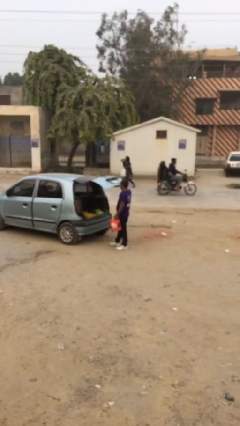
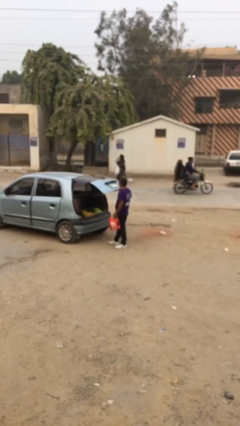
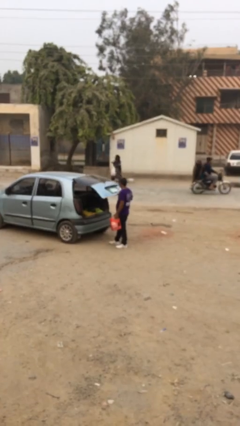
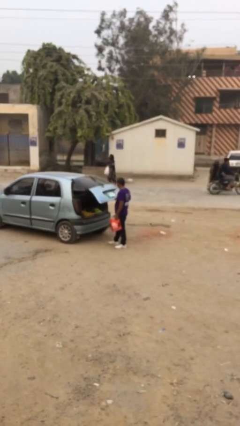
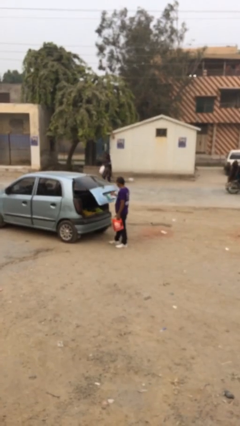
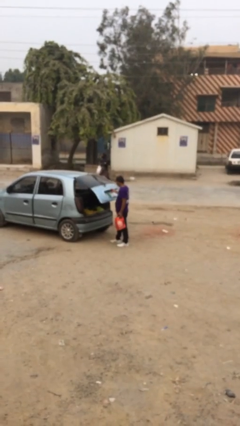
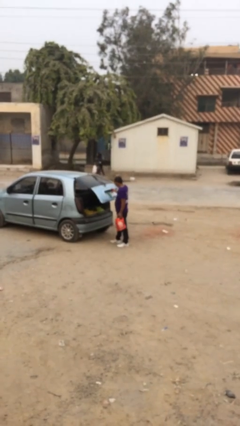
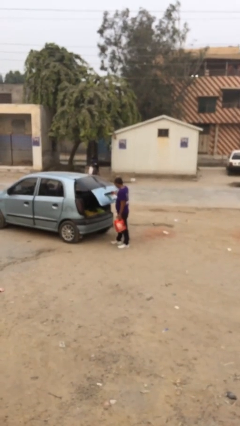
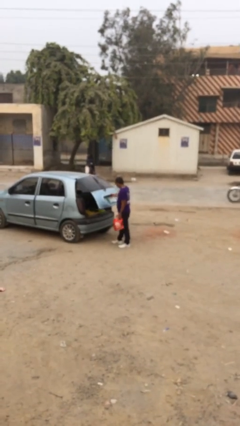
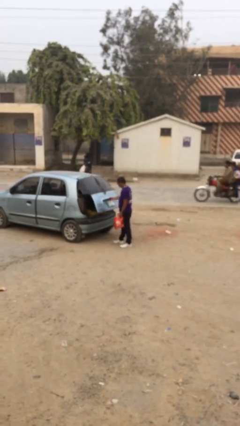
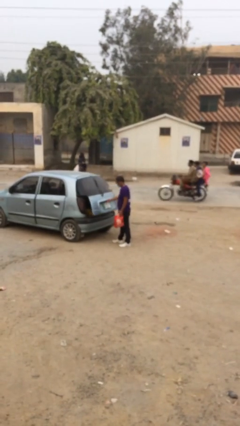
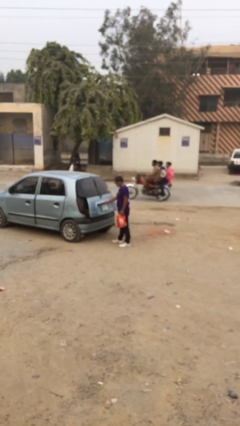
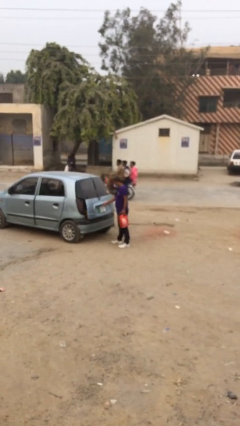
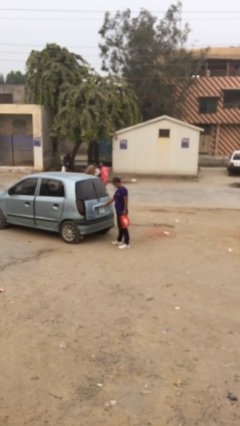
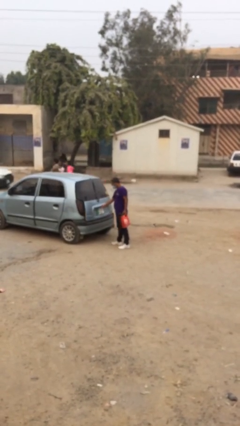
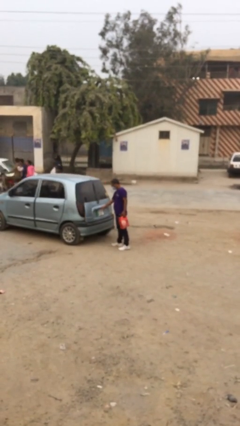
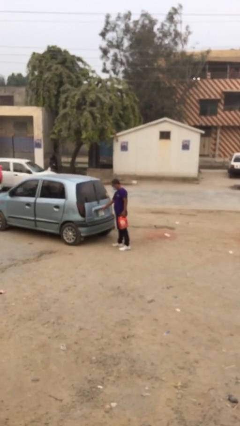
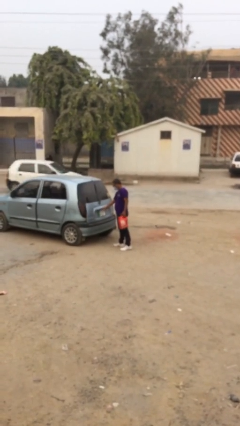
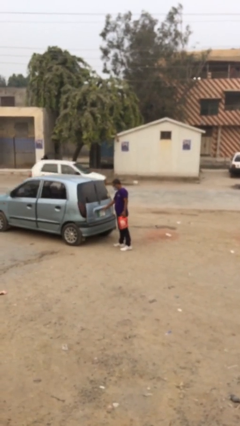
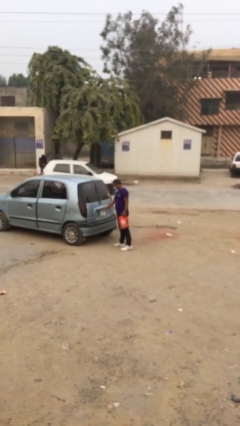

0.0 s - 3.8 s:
person closes car trunk

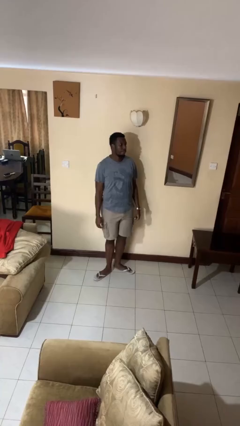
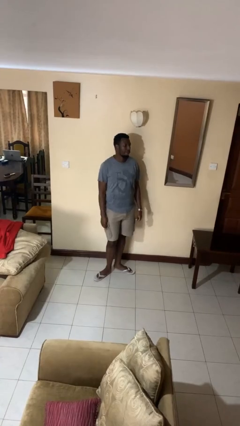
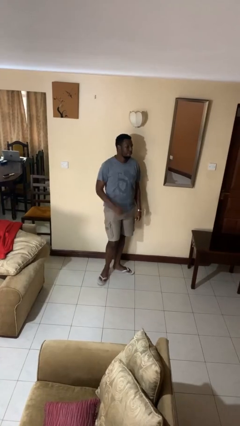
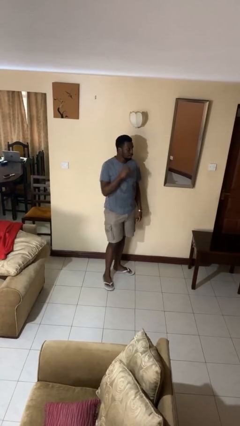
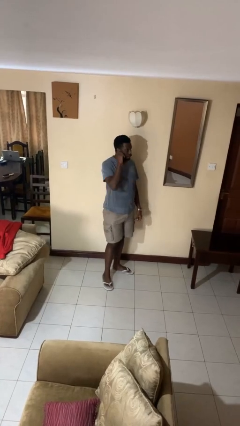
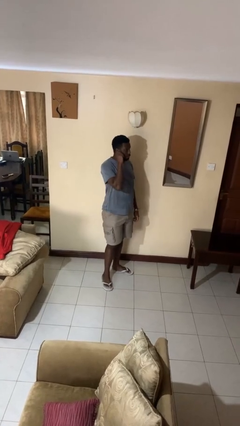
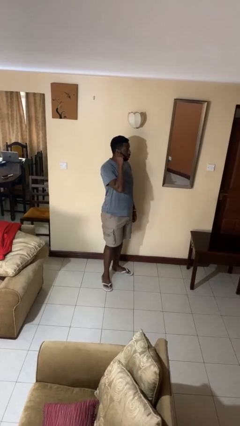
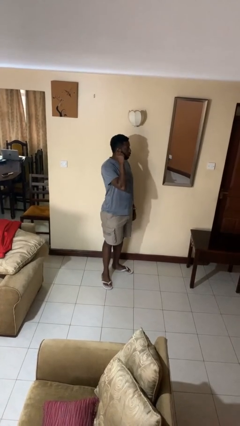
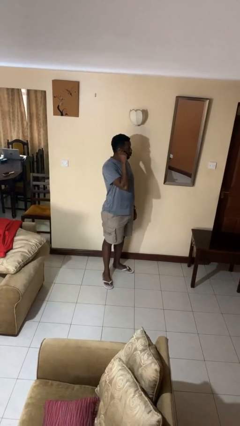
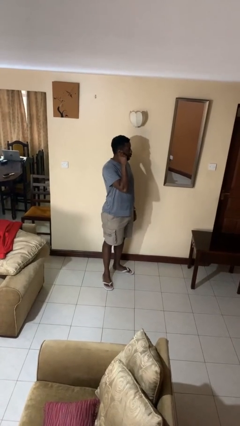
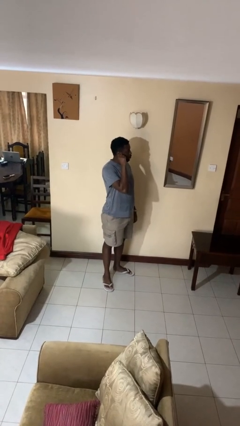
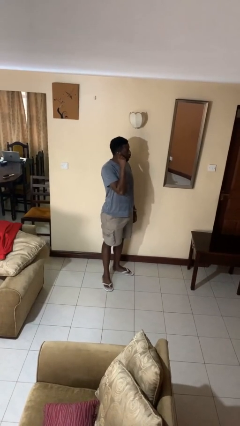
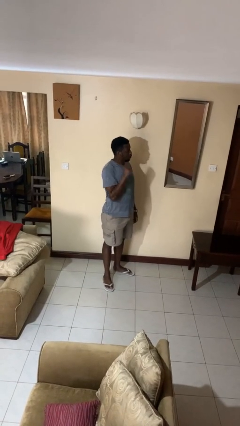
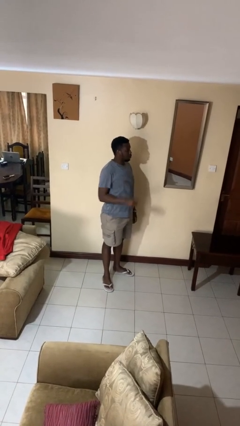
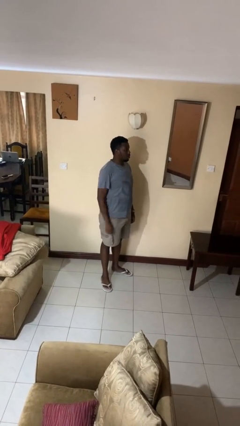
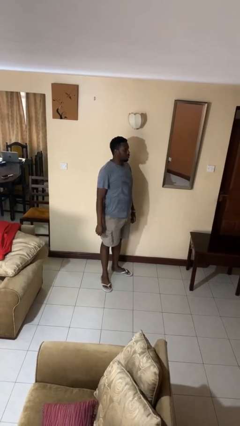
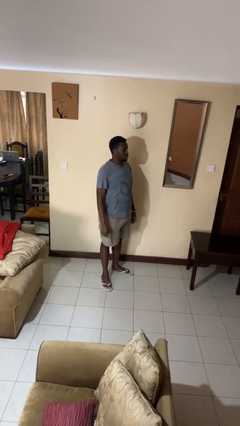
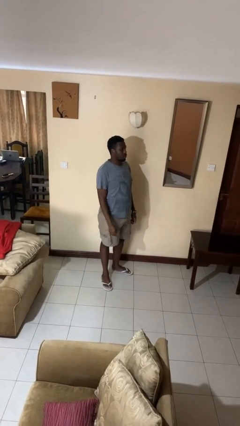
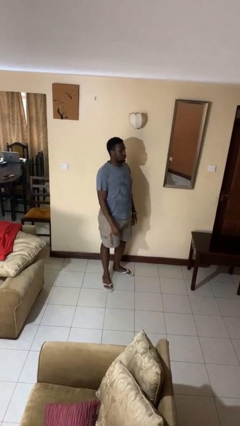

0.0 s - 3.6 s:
person touches earlobe

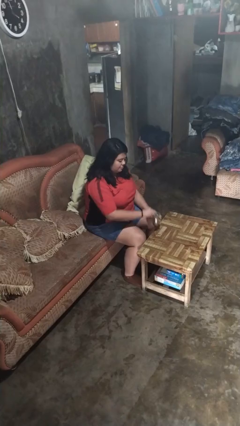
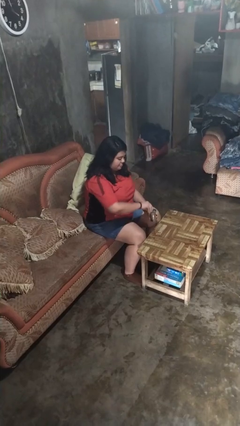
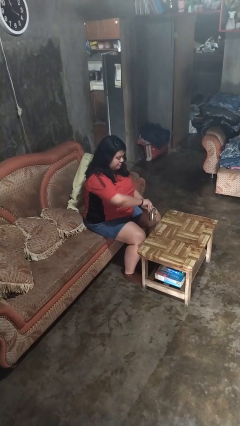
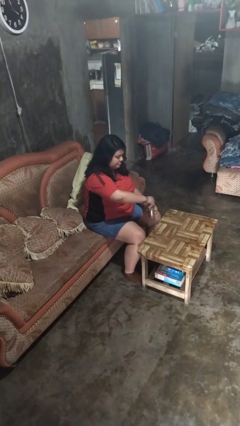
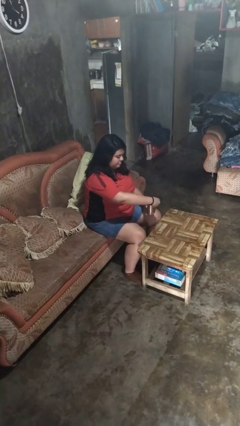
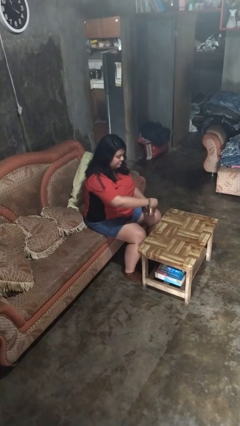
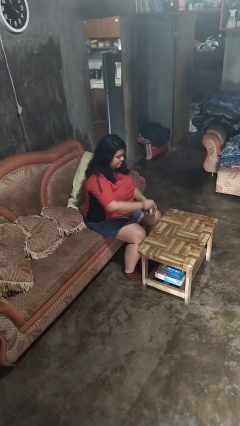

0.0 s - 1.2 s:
person opens beverage can

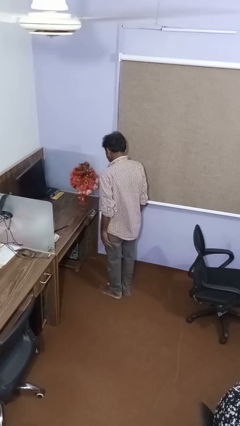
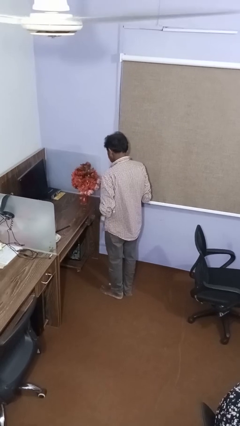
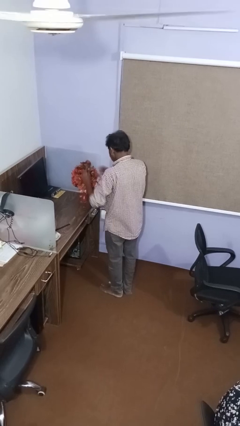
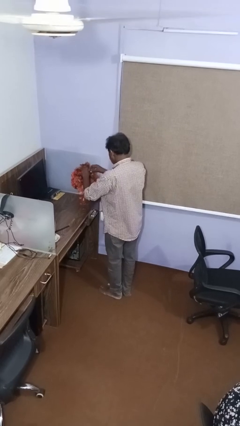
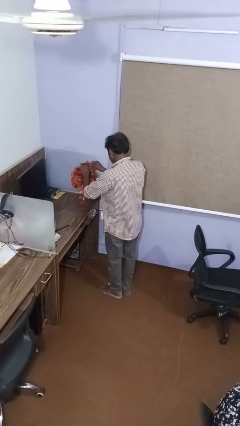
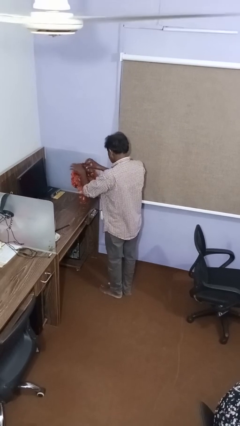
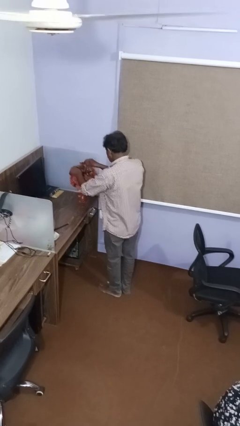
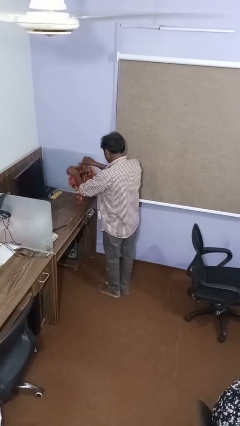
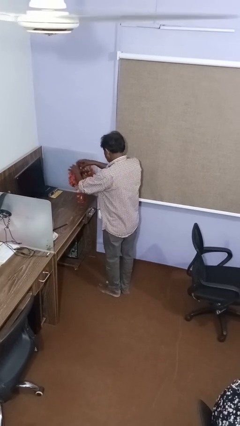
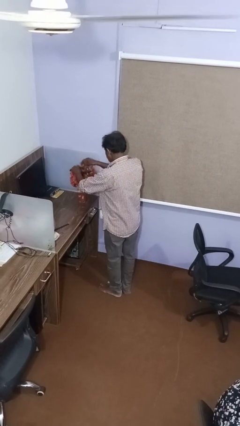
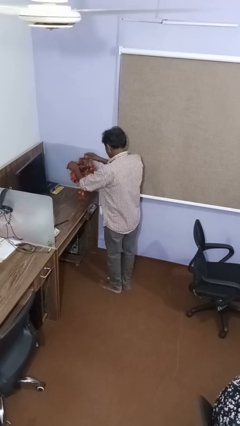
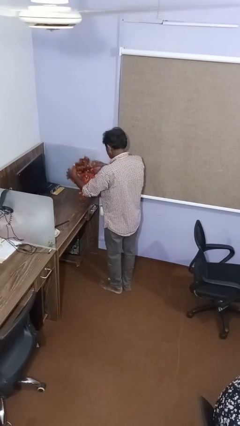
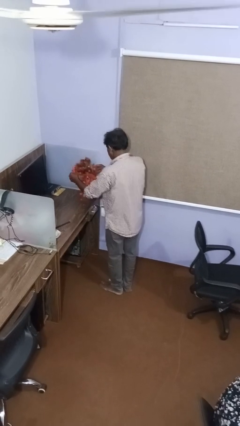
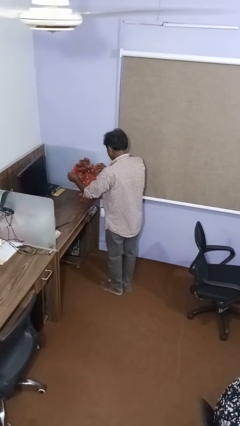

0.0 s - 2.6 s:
person arranges flowers in vase

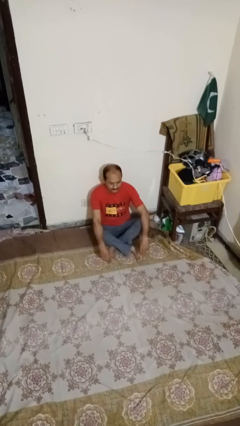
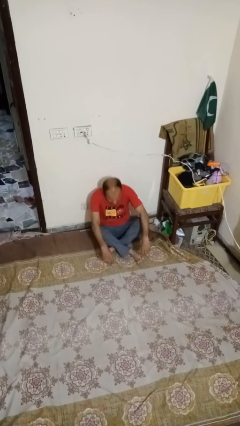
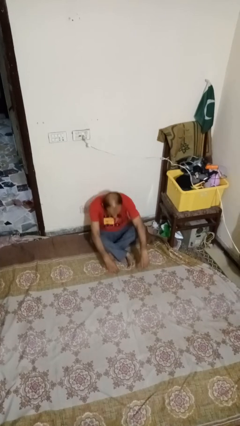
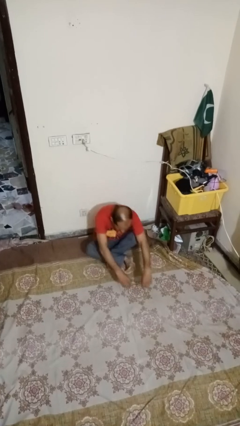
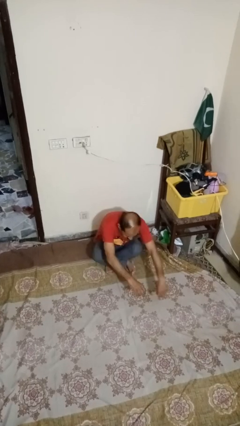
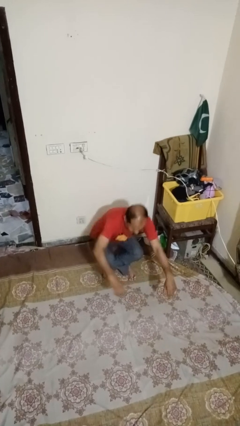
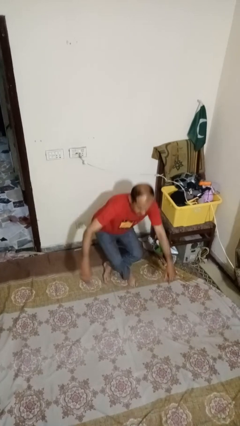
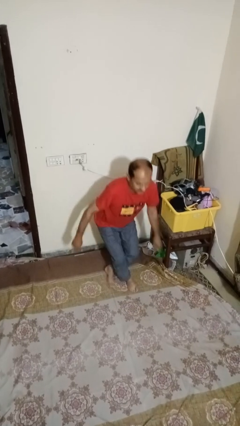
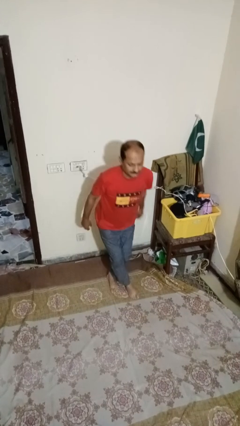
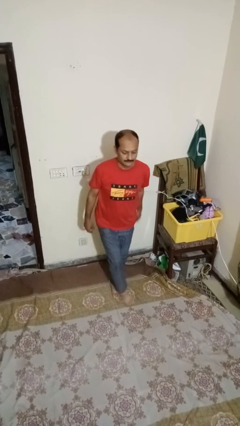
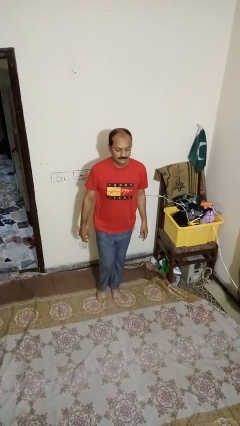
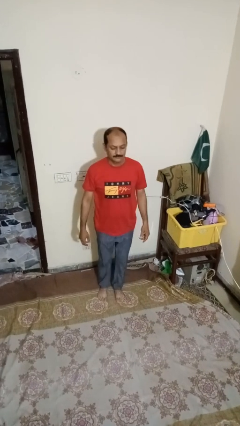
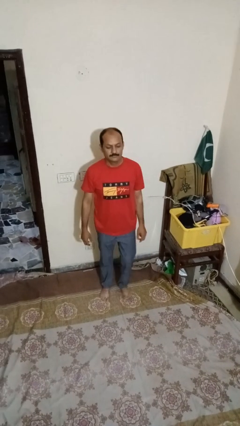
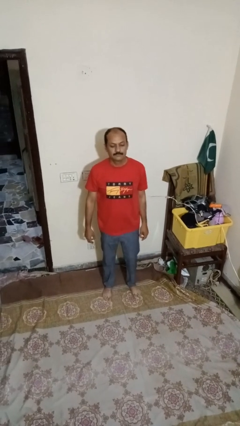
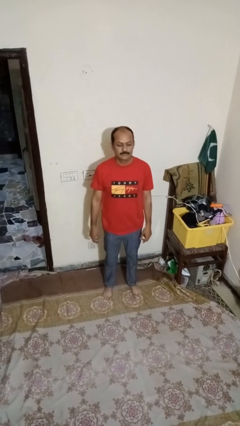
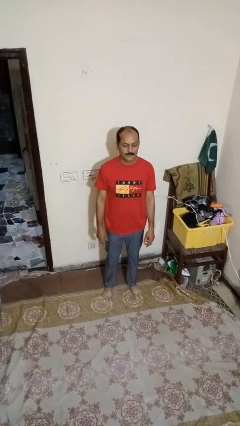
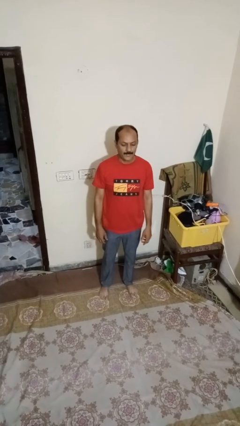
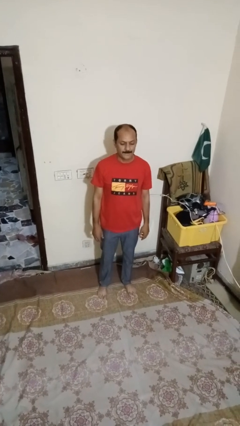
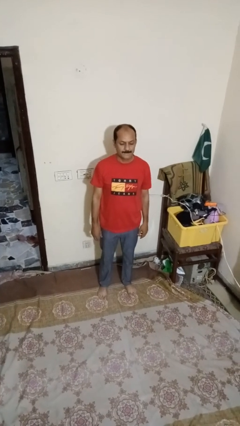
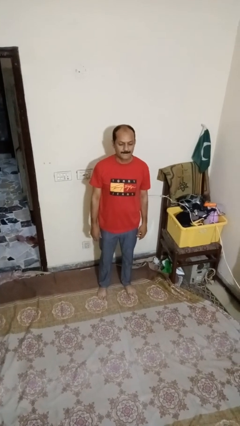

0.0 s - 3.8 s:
person stands up from floor

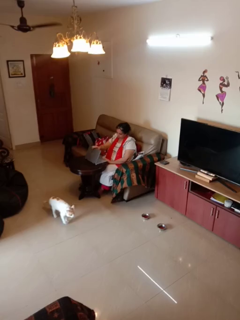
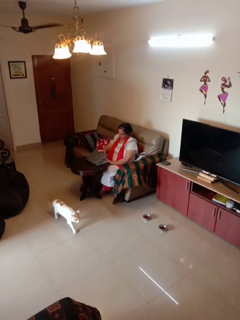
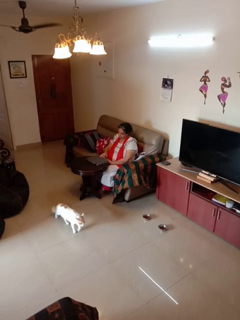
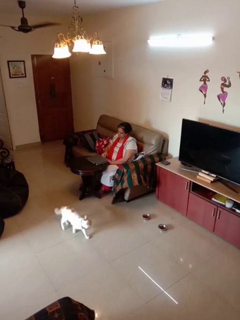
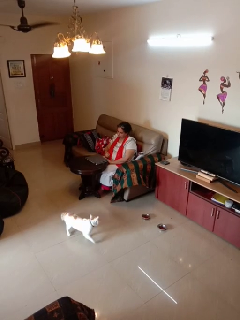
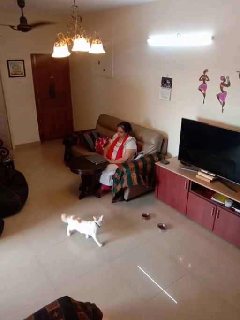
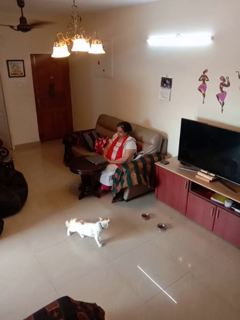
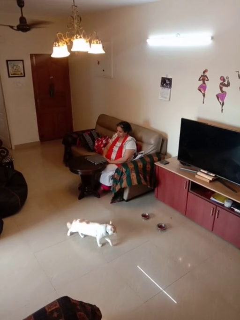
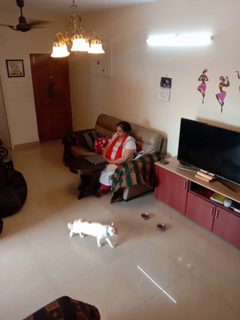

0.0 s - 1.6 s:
person closes laptop

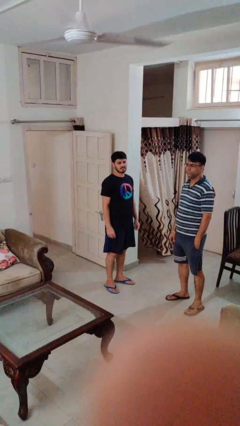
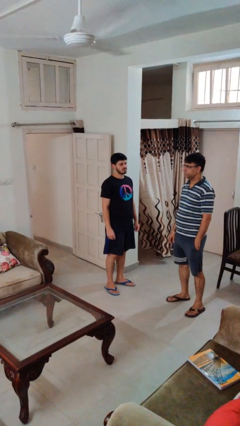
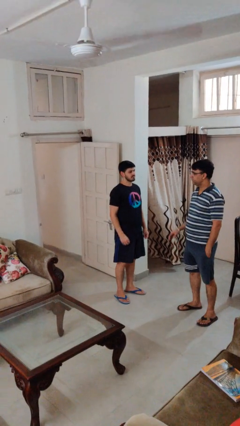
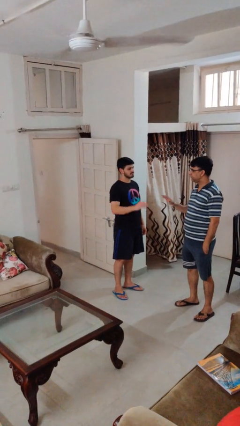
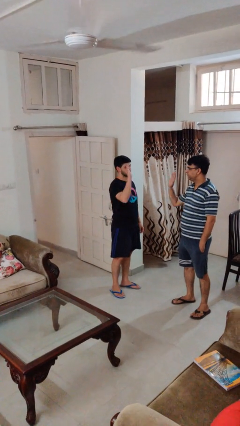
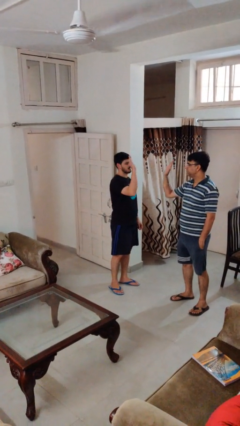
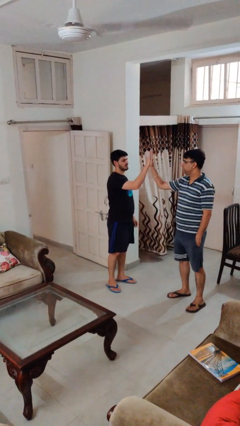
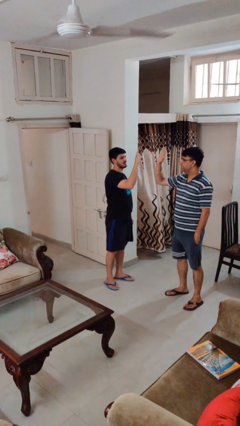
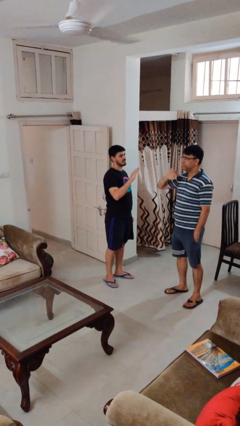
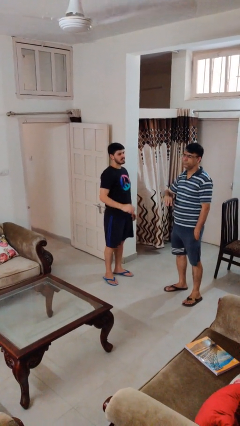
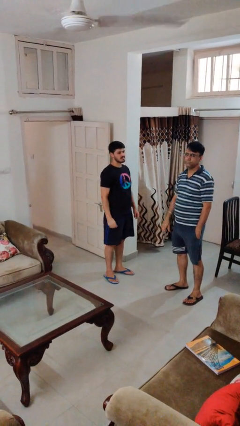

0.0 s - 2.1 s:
person highfives hand
